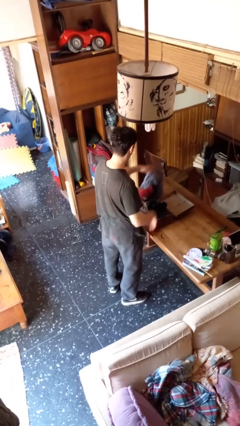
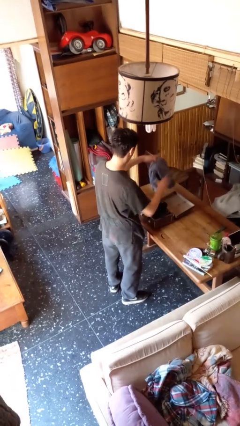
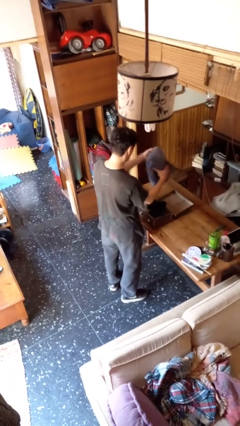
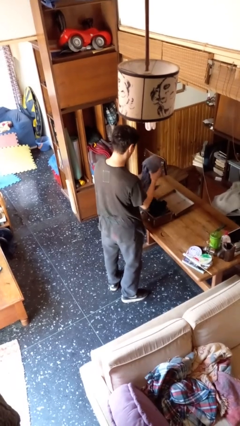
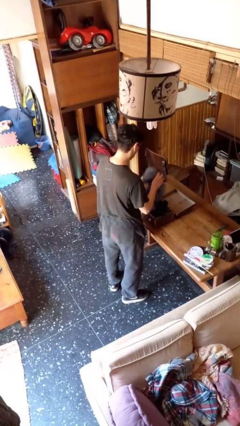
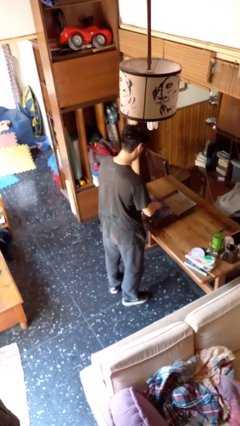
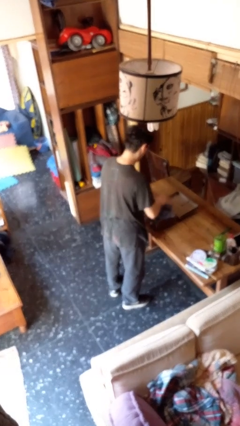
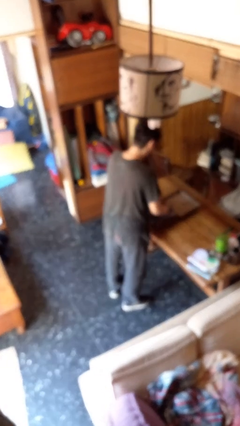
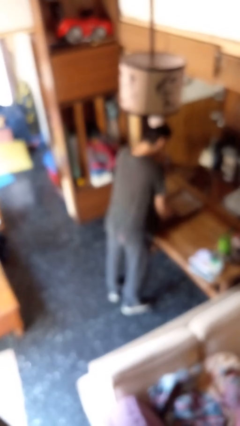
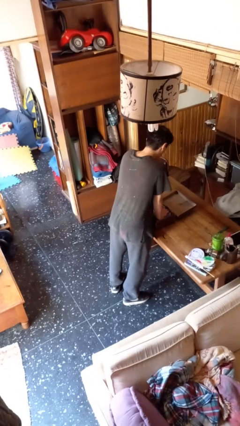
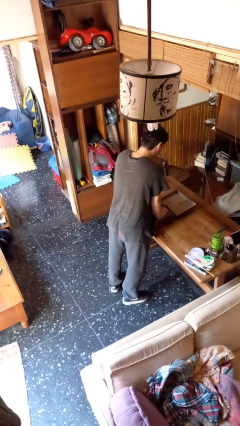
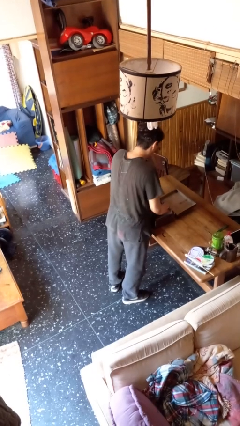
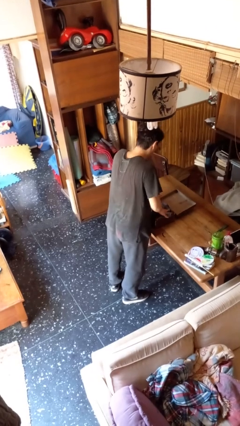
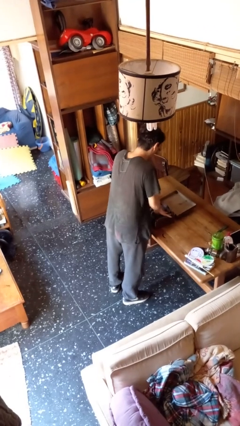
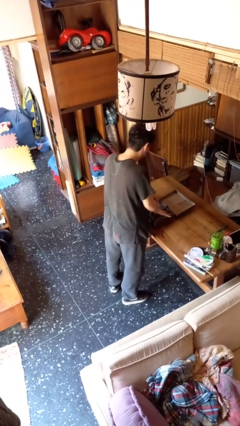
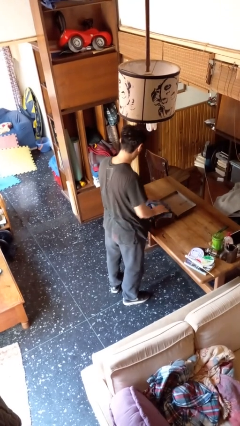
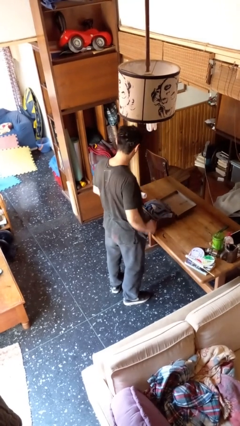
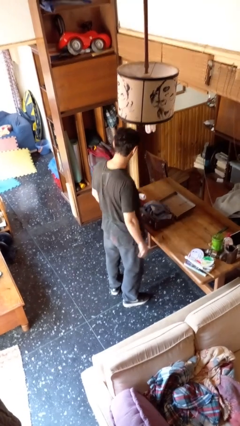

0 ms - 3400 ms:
person loads clothes into suitcase

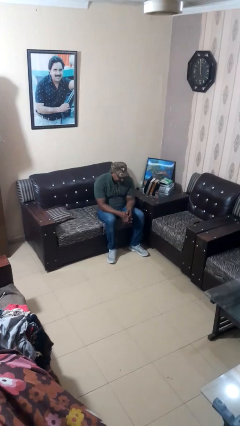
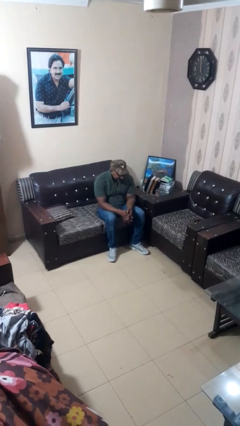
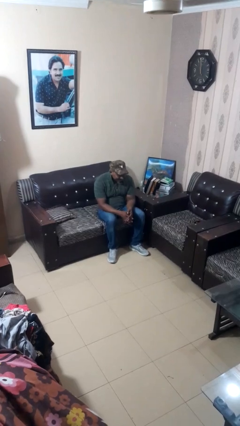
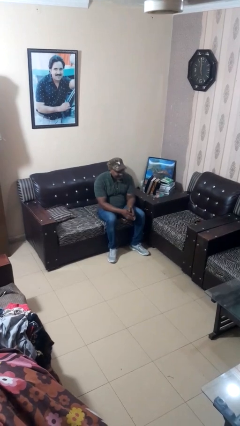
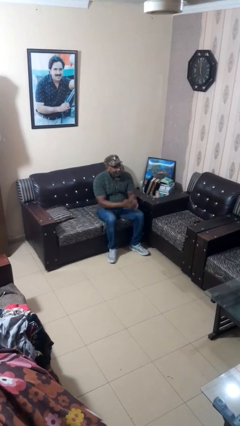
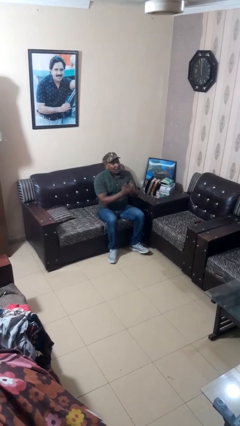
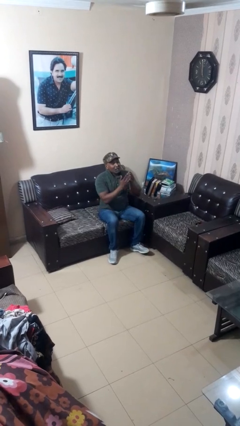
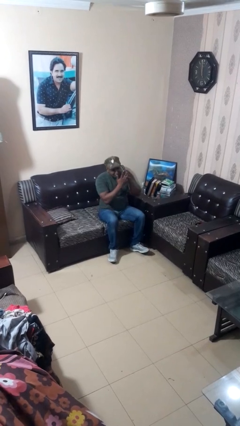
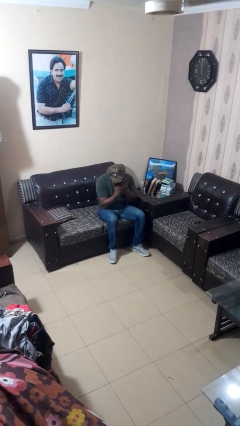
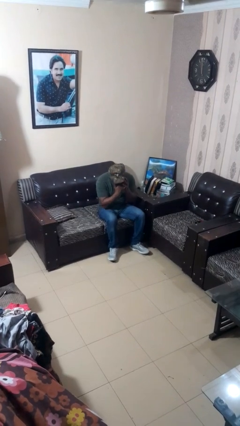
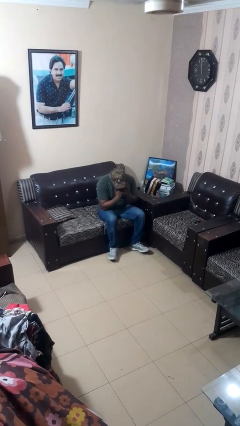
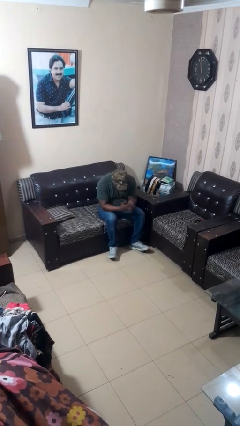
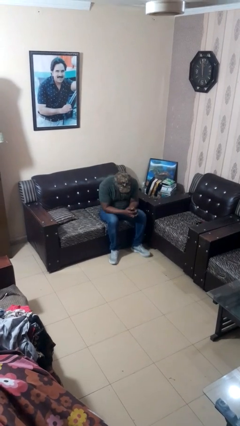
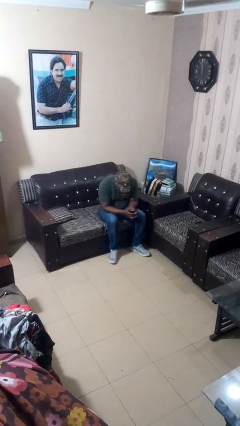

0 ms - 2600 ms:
person sneezes into hand

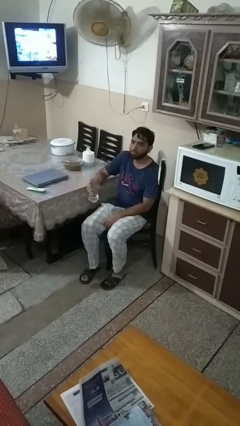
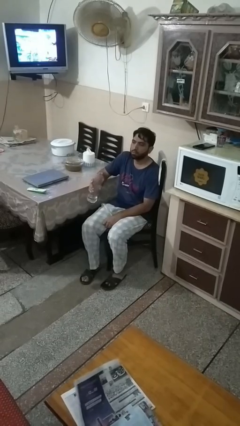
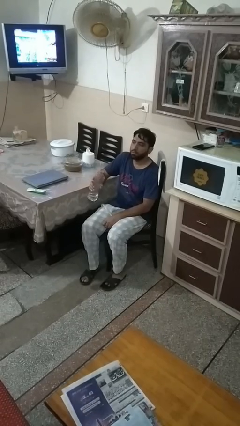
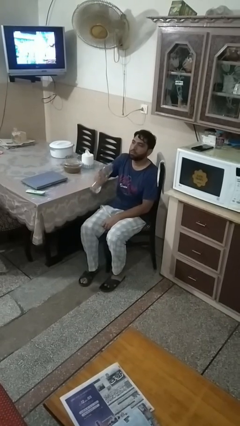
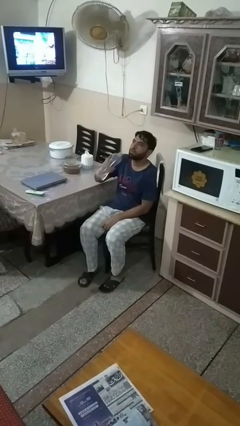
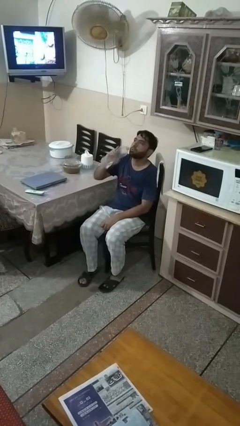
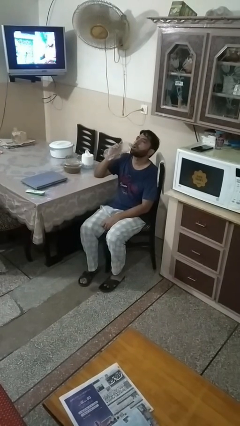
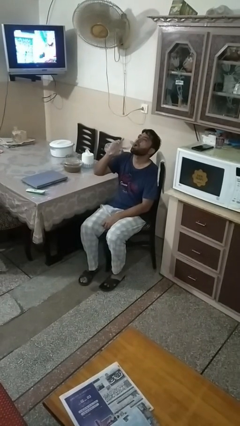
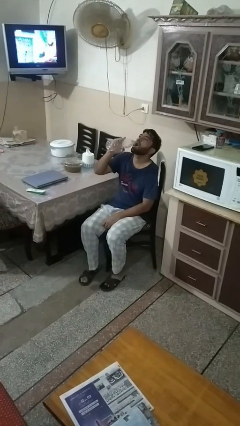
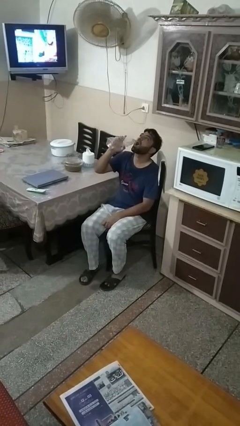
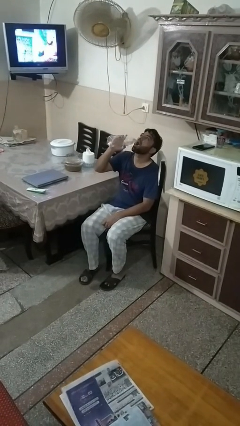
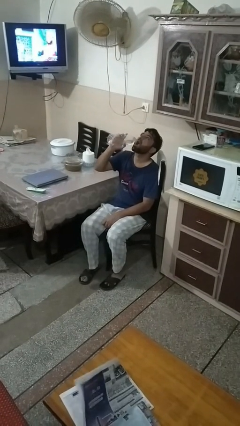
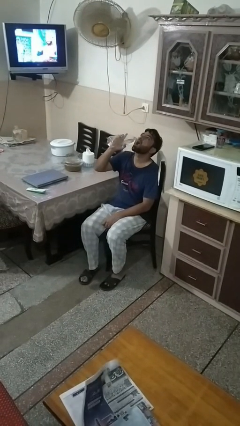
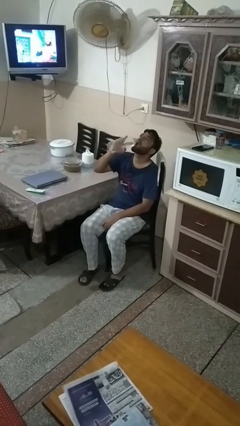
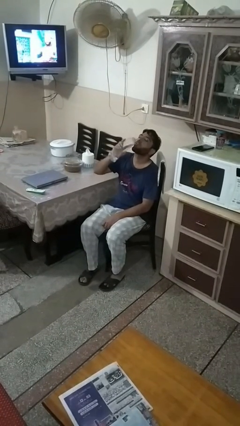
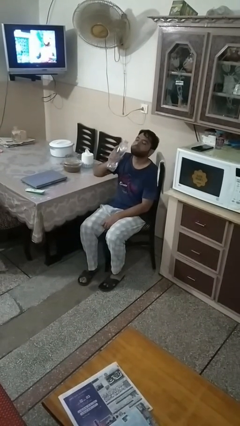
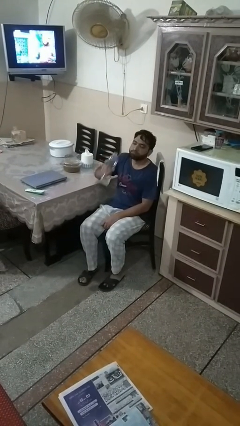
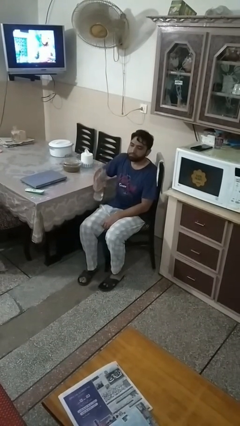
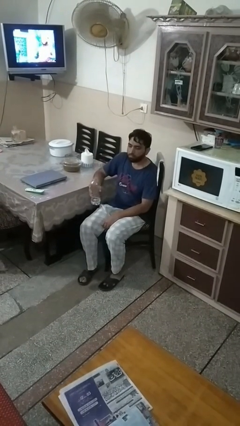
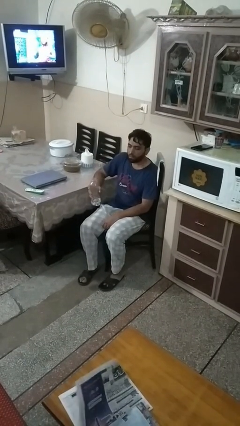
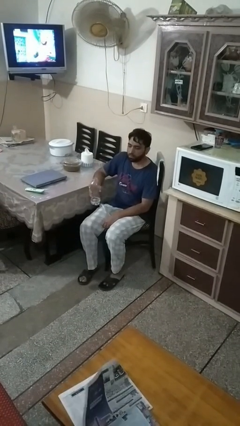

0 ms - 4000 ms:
person drinks from bottle

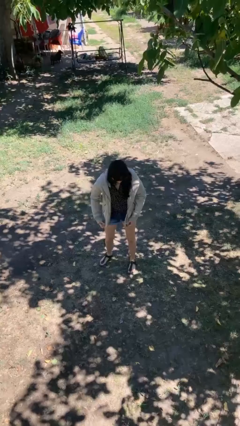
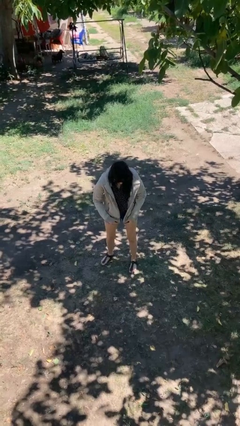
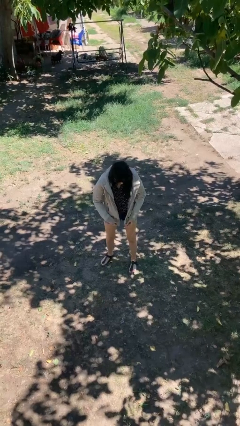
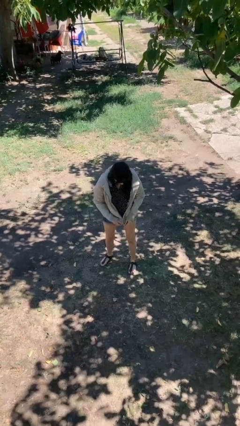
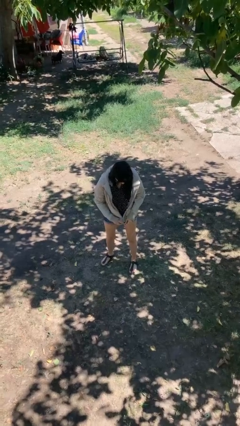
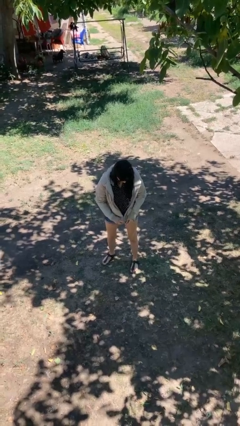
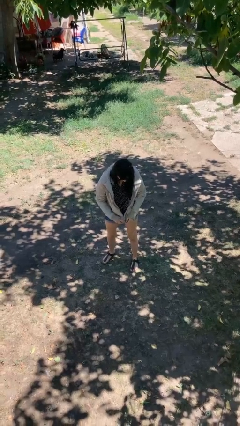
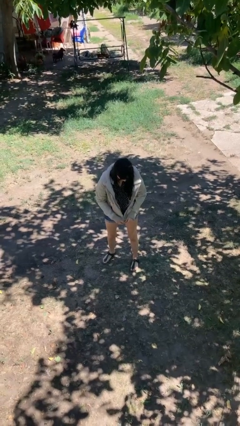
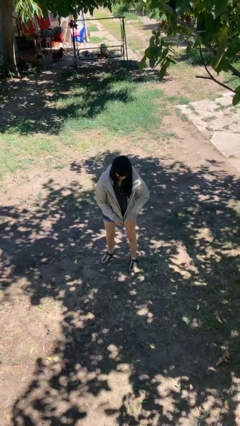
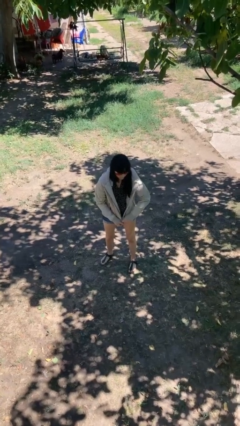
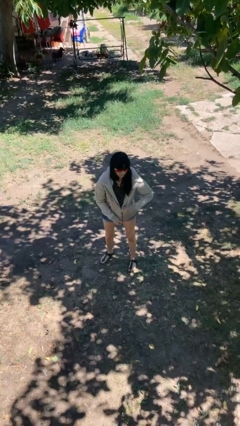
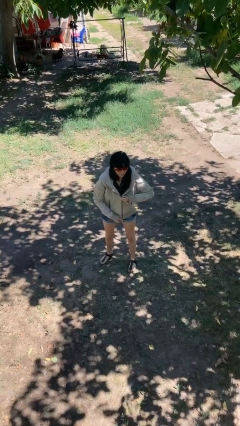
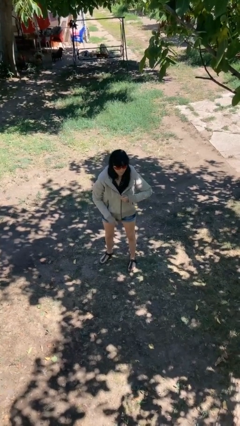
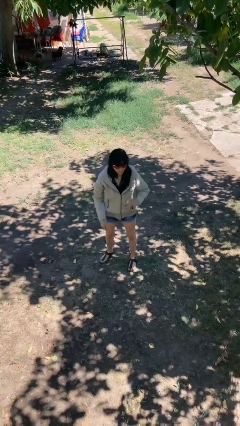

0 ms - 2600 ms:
person zips up jacket

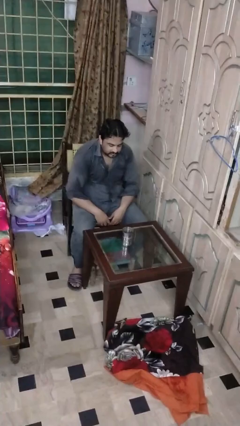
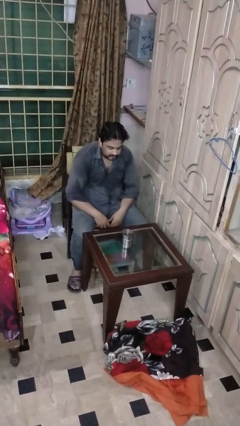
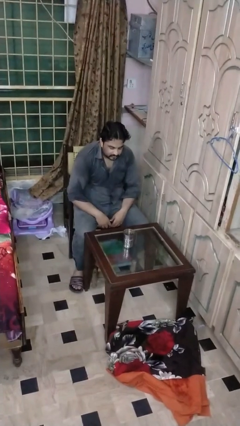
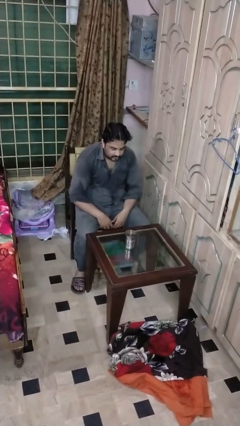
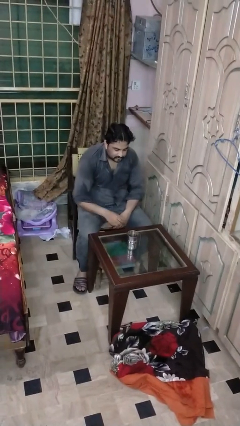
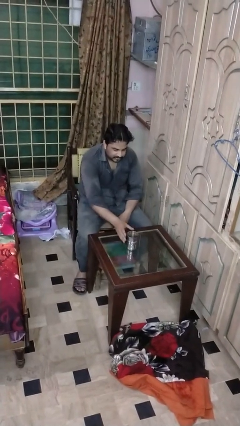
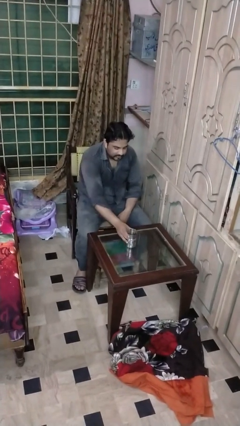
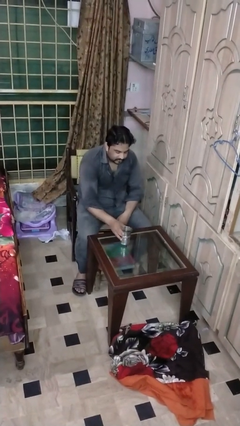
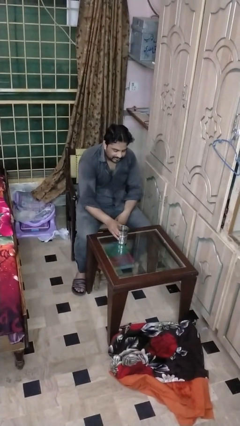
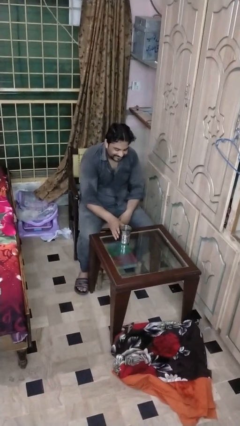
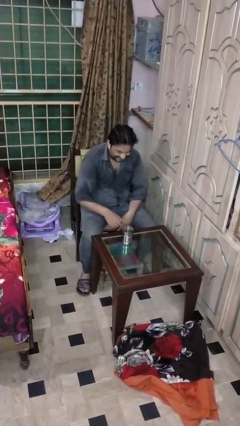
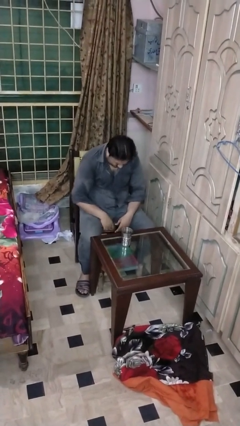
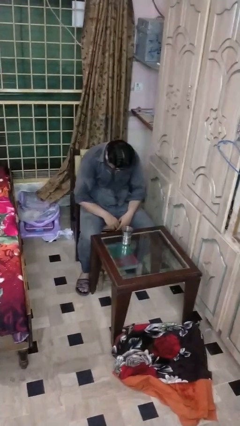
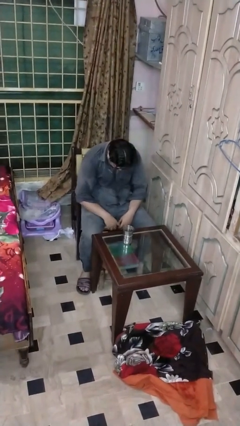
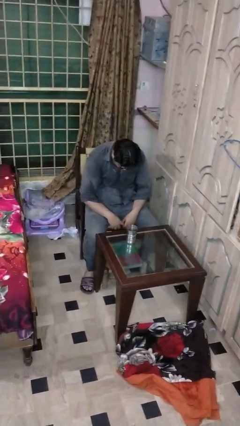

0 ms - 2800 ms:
person sets upright glass

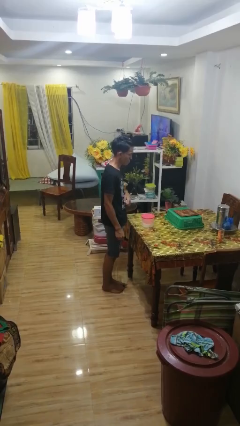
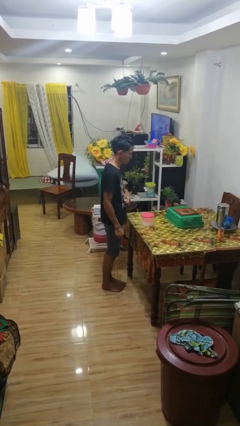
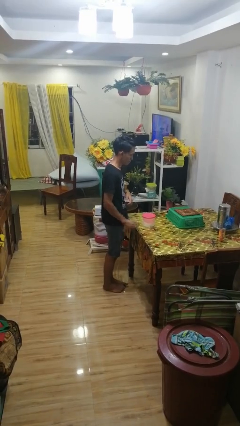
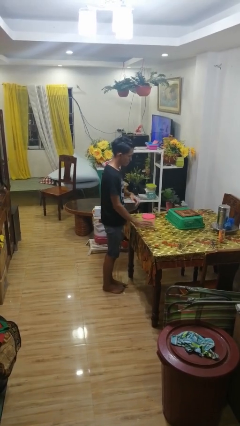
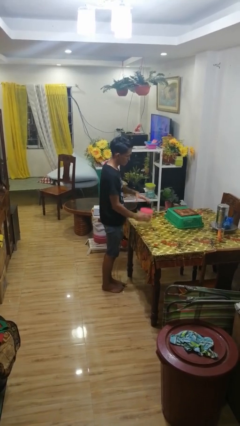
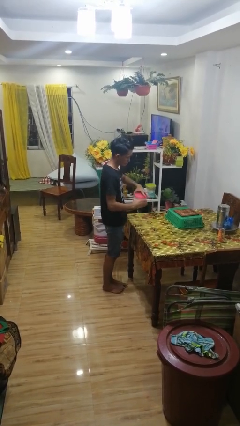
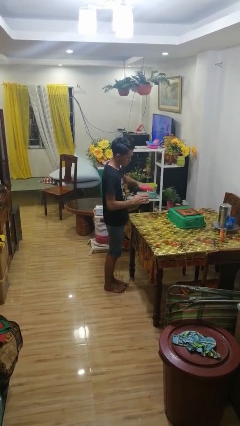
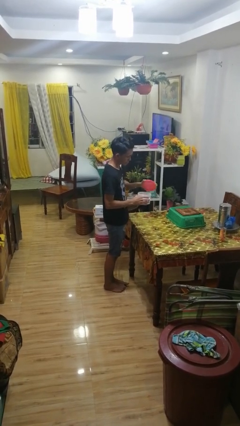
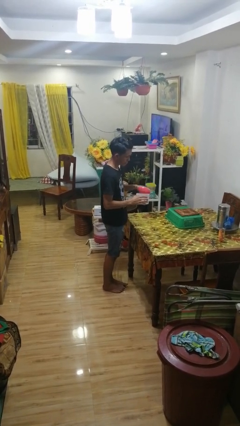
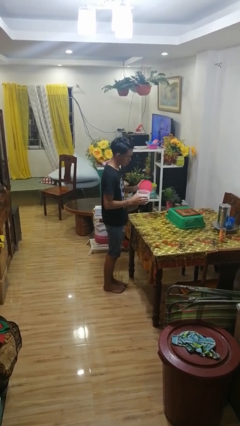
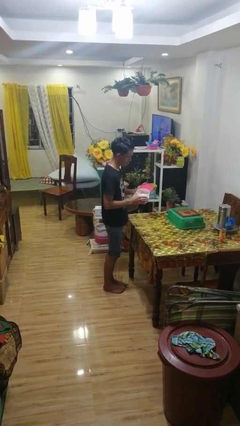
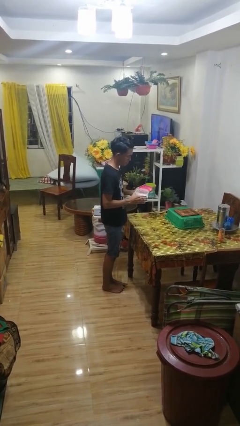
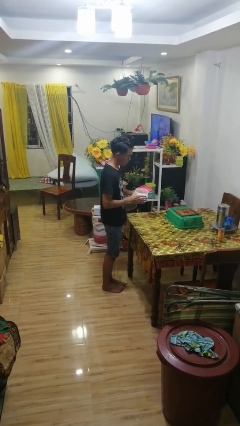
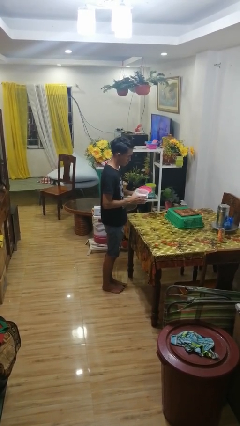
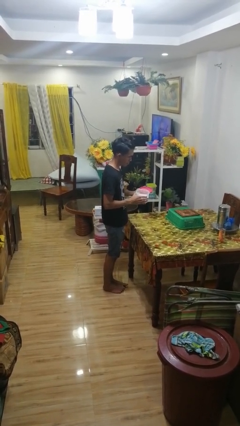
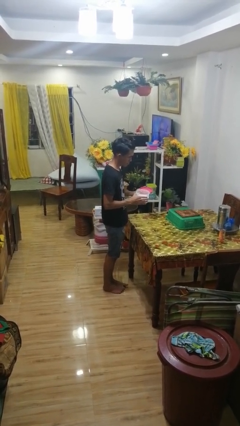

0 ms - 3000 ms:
person opens jar
